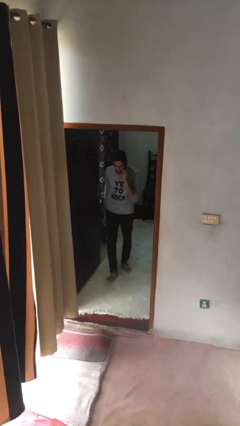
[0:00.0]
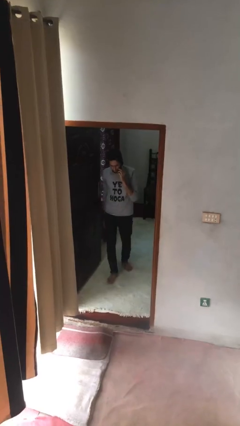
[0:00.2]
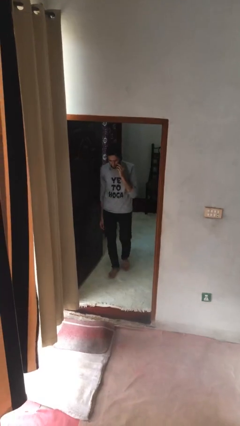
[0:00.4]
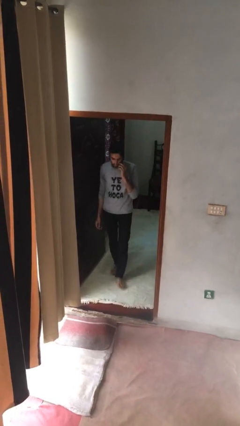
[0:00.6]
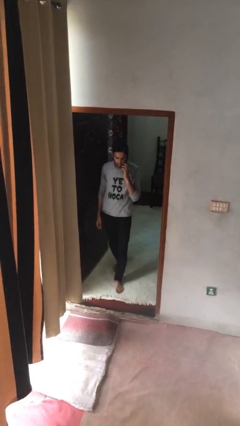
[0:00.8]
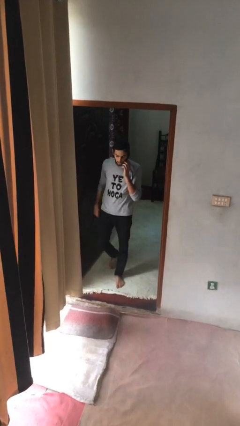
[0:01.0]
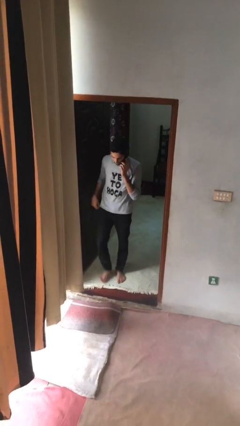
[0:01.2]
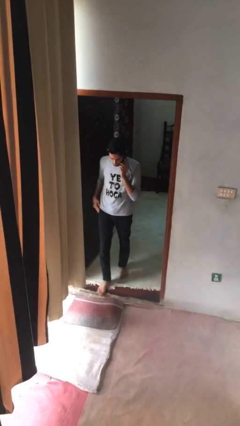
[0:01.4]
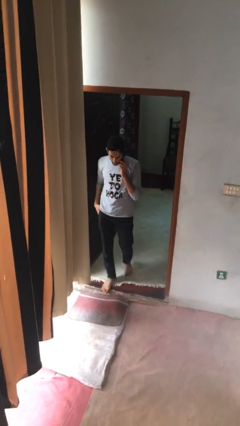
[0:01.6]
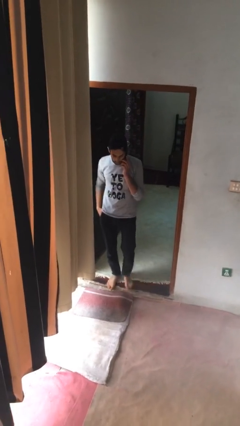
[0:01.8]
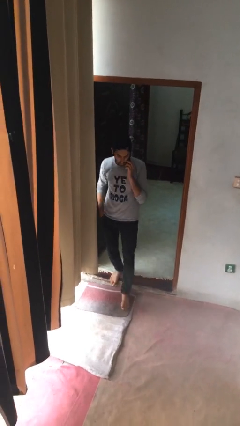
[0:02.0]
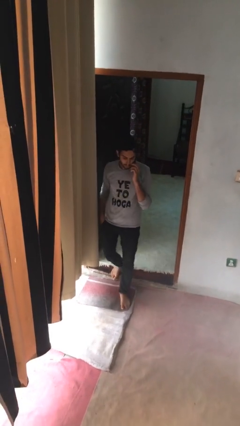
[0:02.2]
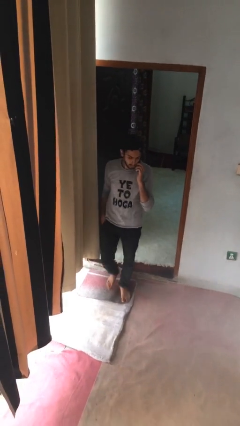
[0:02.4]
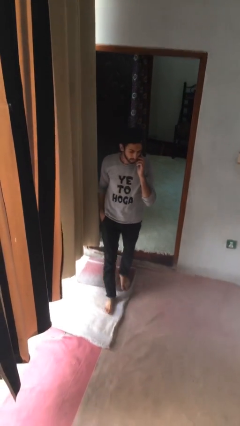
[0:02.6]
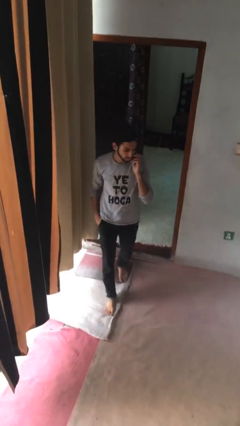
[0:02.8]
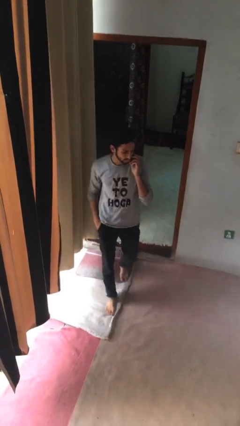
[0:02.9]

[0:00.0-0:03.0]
person enters scene through structure

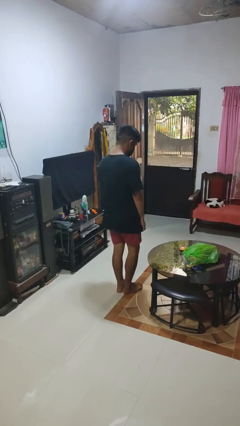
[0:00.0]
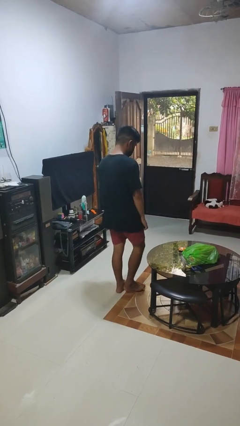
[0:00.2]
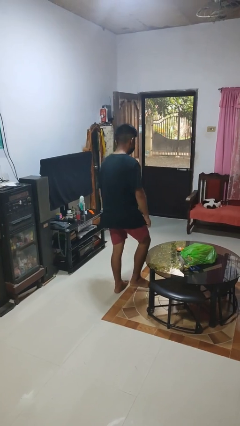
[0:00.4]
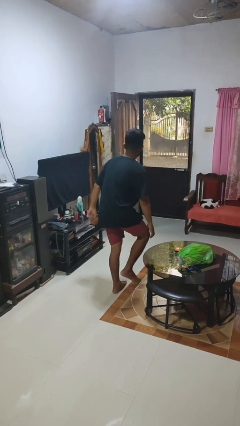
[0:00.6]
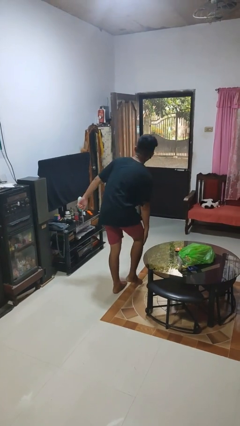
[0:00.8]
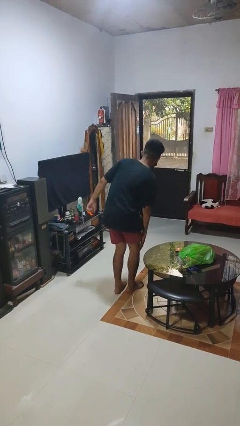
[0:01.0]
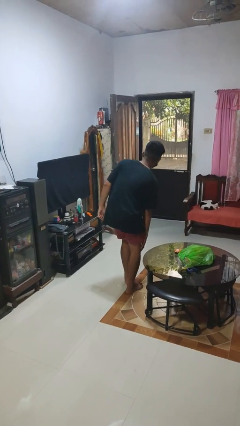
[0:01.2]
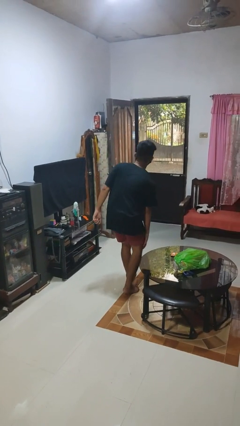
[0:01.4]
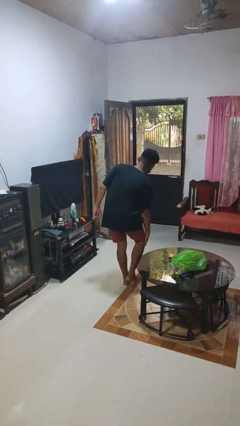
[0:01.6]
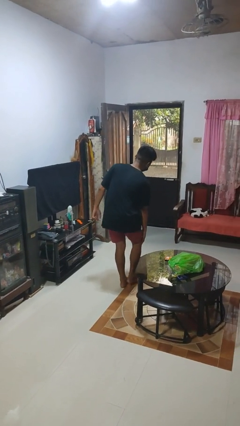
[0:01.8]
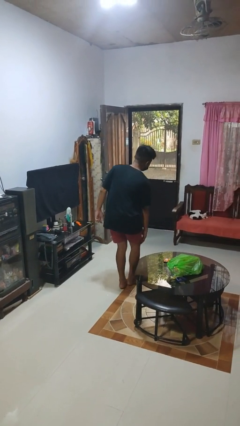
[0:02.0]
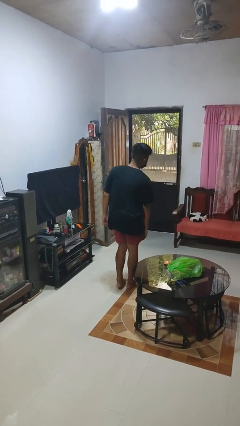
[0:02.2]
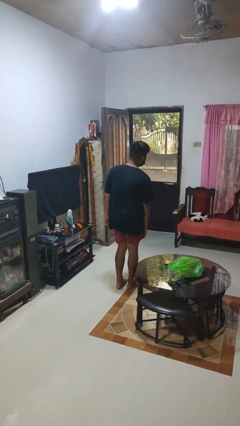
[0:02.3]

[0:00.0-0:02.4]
person bumps into table

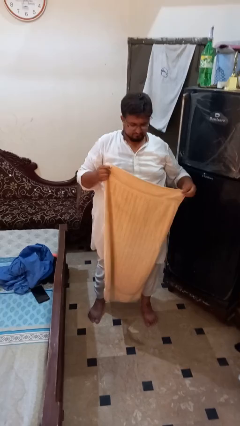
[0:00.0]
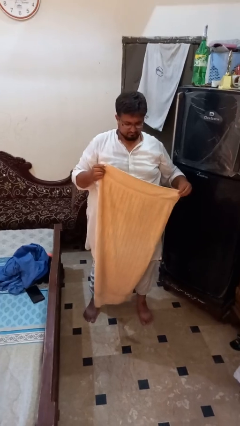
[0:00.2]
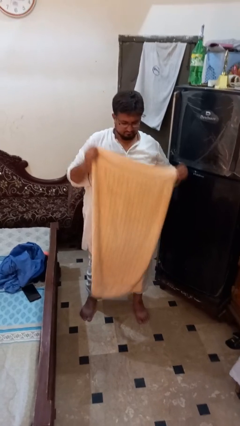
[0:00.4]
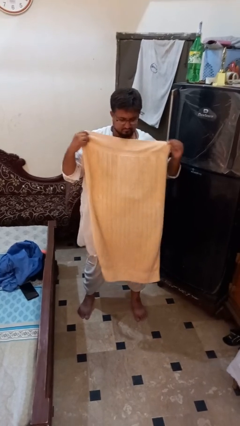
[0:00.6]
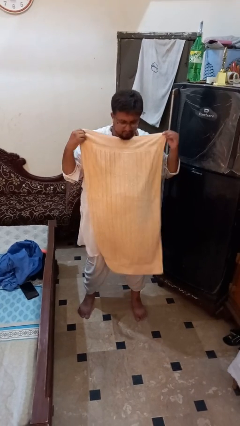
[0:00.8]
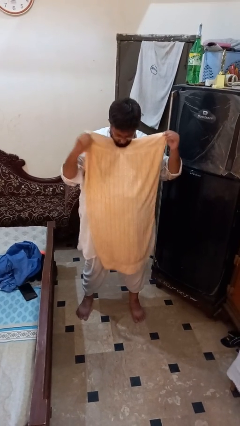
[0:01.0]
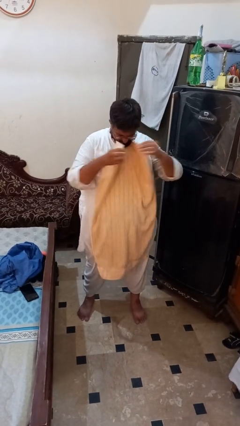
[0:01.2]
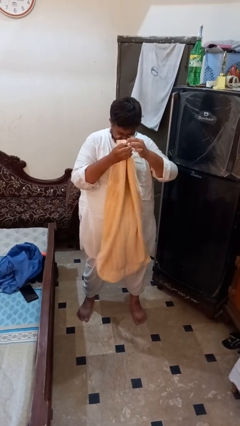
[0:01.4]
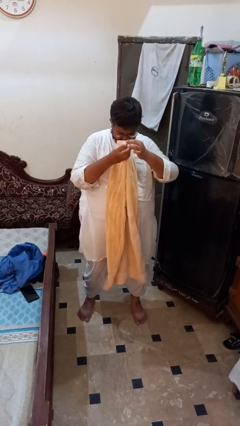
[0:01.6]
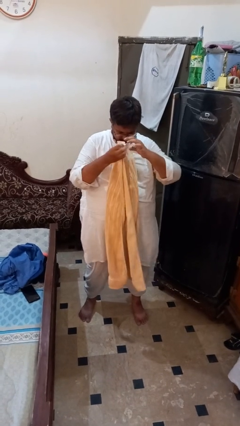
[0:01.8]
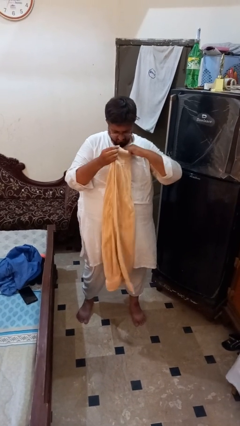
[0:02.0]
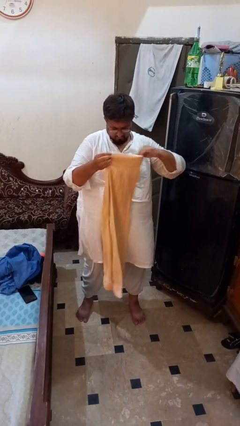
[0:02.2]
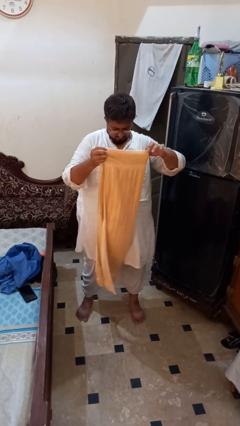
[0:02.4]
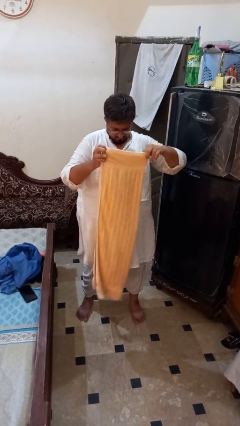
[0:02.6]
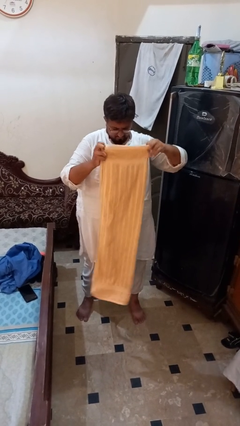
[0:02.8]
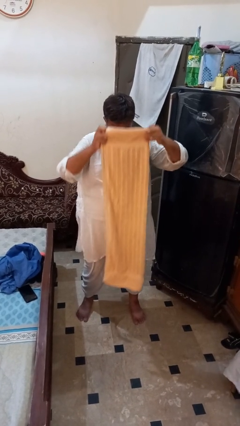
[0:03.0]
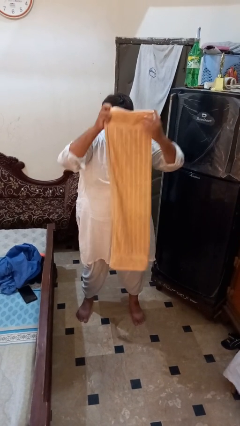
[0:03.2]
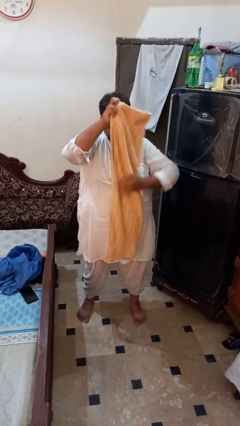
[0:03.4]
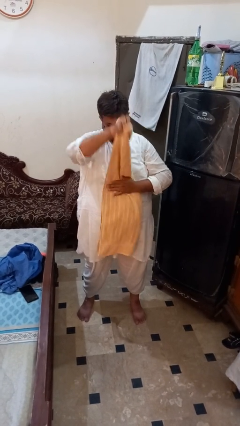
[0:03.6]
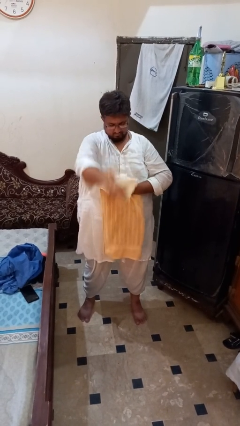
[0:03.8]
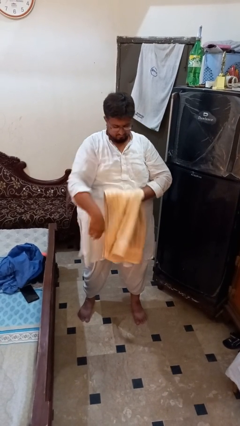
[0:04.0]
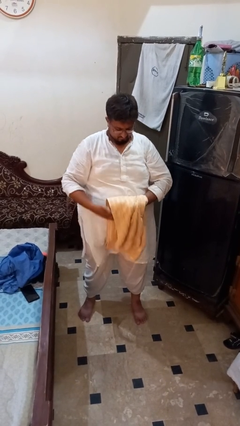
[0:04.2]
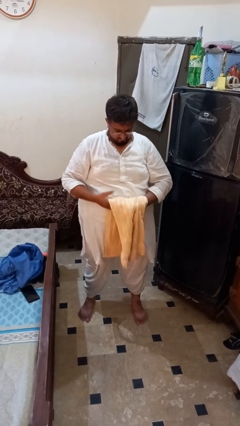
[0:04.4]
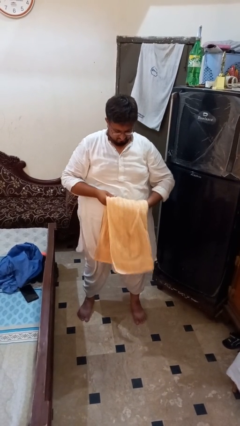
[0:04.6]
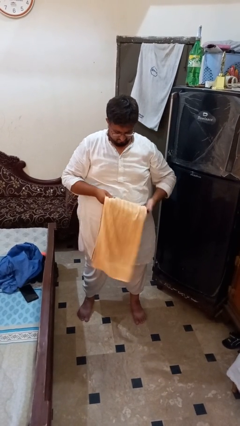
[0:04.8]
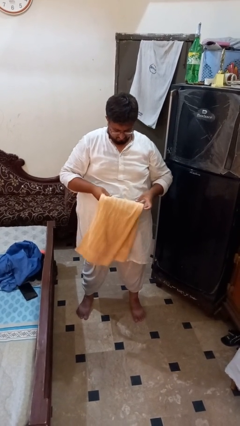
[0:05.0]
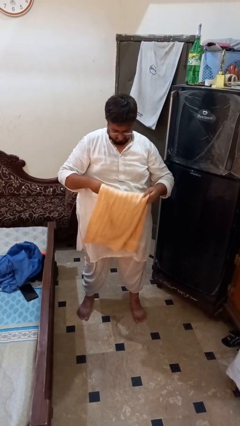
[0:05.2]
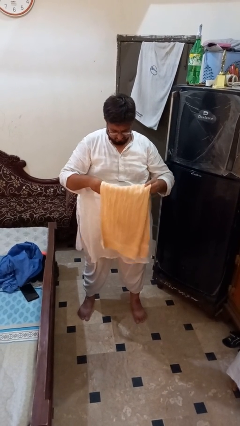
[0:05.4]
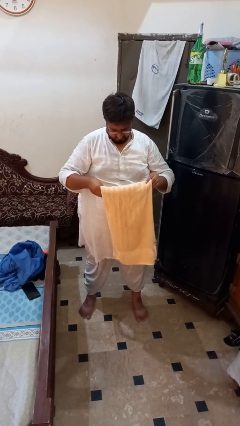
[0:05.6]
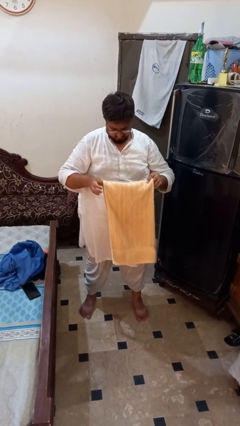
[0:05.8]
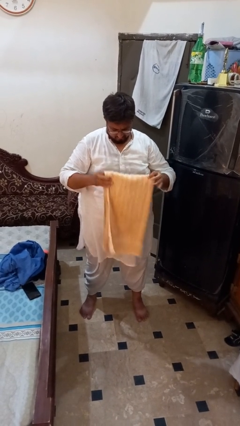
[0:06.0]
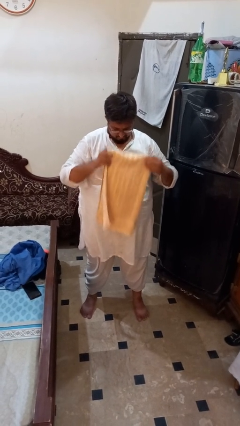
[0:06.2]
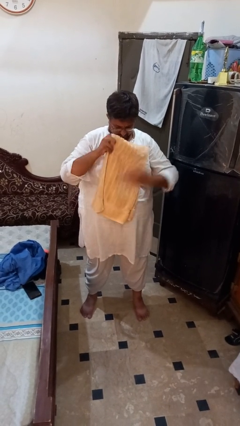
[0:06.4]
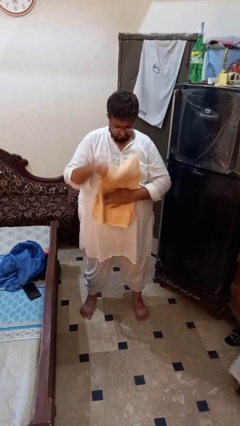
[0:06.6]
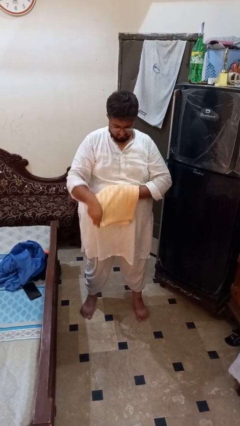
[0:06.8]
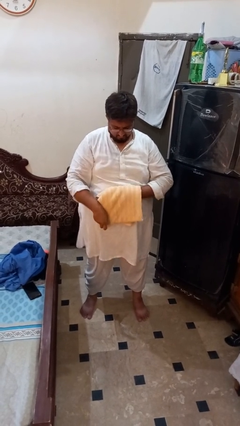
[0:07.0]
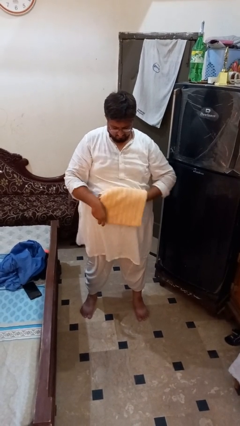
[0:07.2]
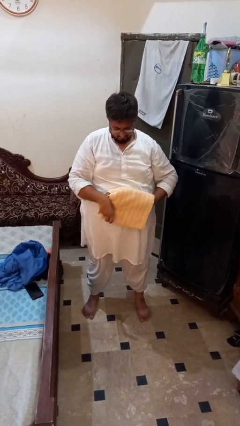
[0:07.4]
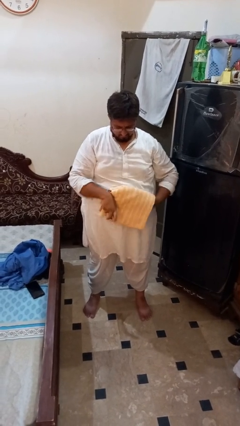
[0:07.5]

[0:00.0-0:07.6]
person folds towel

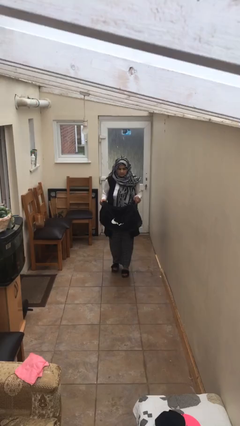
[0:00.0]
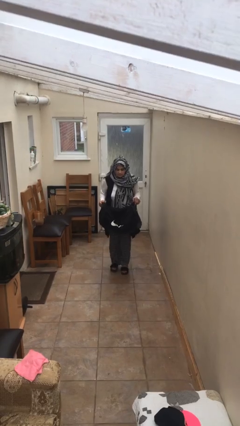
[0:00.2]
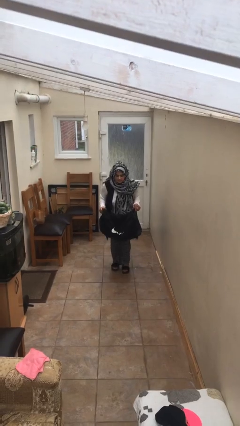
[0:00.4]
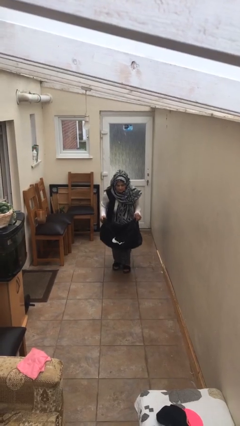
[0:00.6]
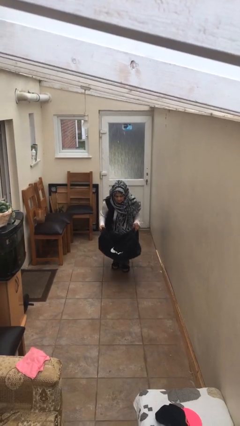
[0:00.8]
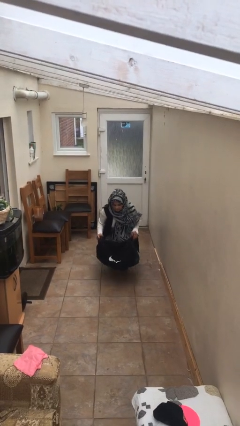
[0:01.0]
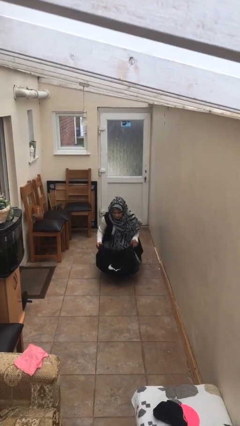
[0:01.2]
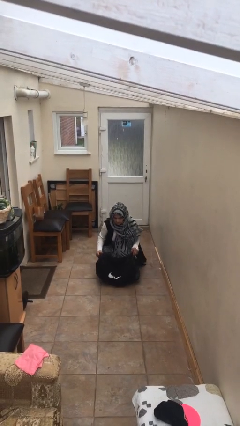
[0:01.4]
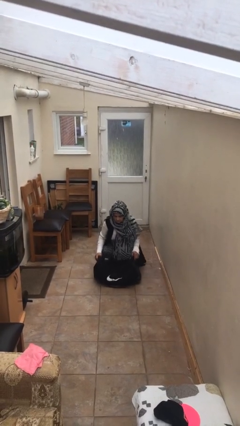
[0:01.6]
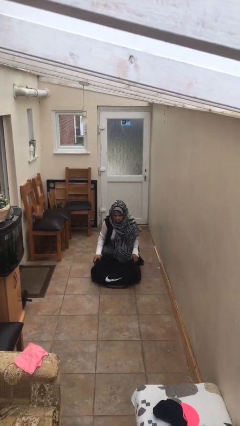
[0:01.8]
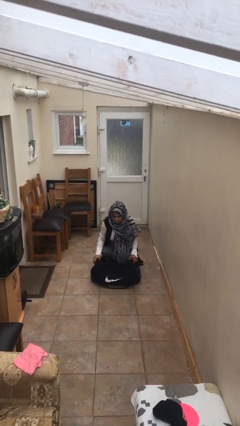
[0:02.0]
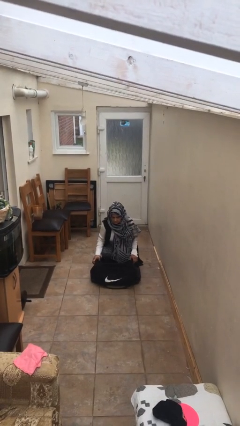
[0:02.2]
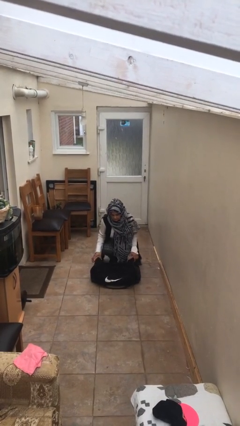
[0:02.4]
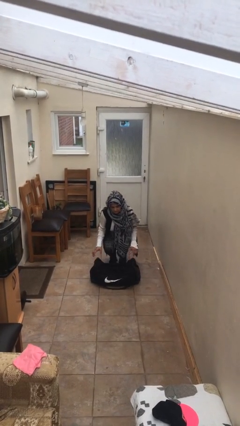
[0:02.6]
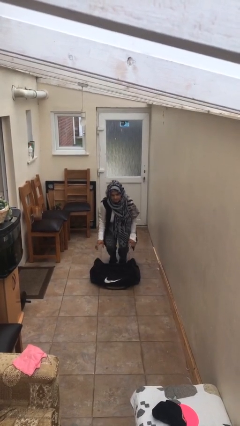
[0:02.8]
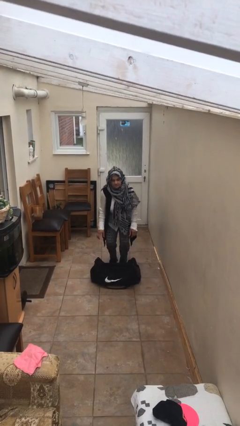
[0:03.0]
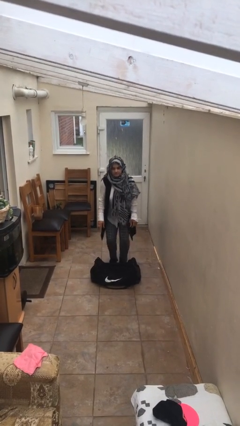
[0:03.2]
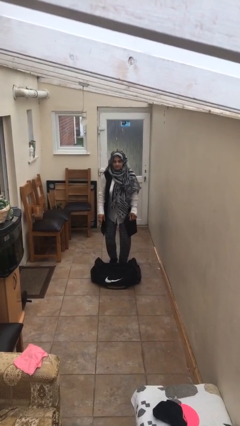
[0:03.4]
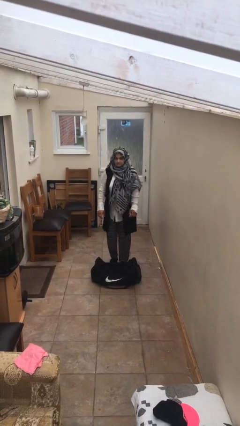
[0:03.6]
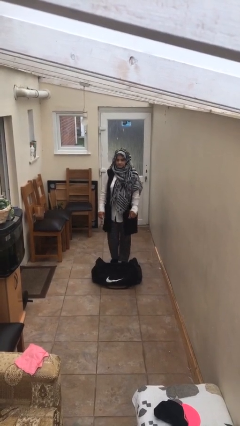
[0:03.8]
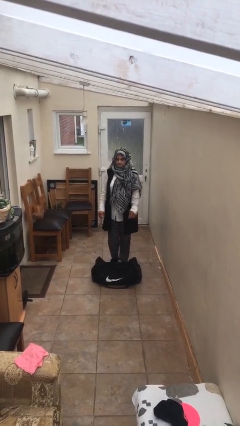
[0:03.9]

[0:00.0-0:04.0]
person puts down object on floor

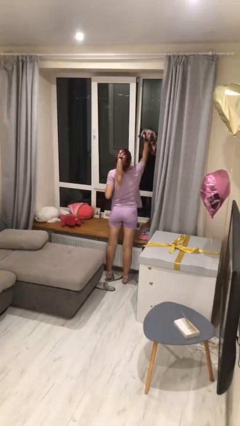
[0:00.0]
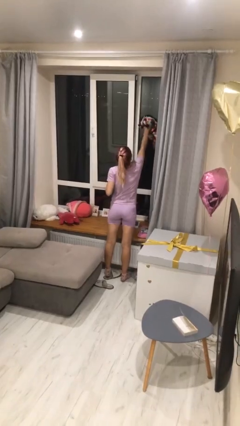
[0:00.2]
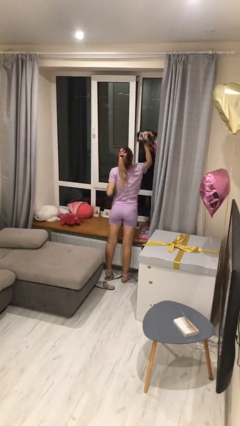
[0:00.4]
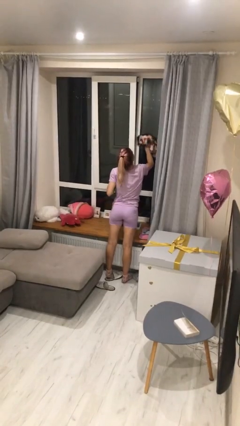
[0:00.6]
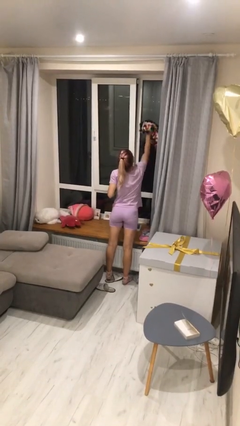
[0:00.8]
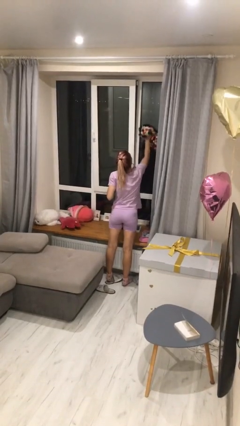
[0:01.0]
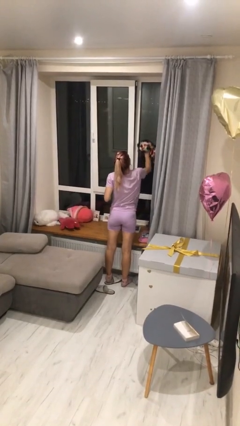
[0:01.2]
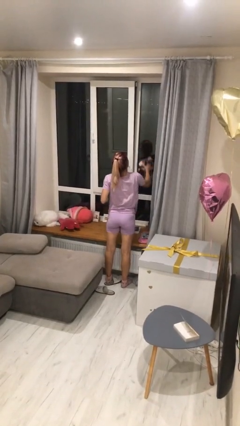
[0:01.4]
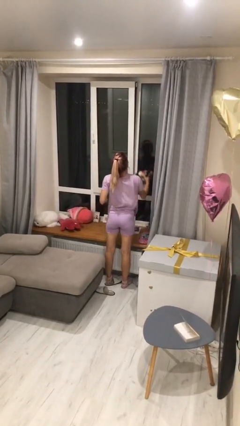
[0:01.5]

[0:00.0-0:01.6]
person washes window
